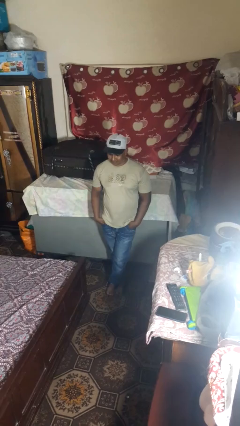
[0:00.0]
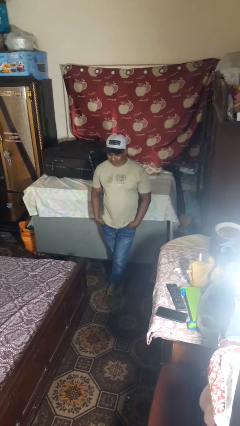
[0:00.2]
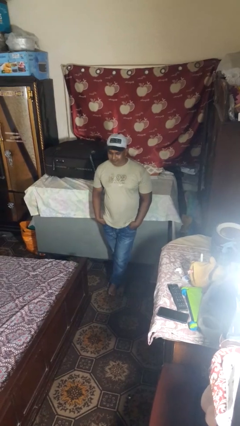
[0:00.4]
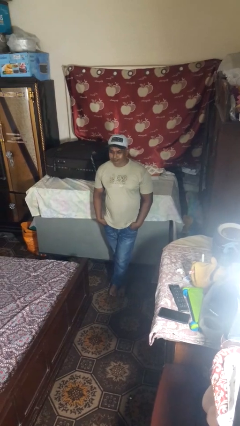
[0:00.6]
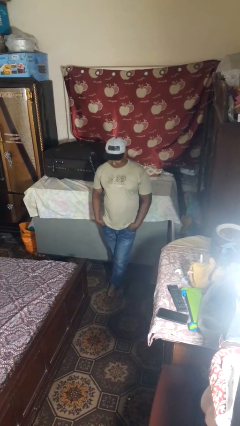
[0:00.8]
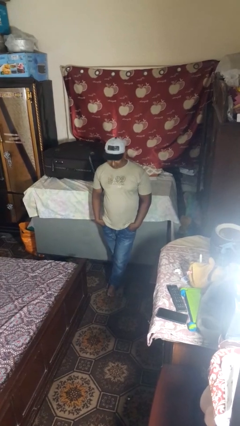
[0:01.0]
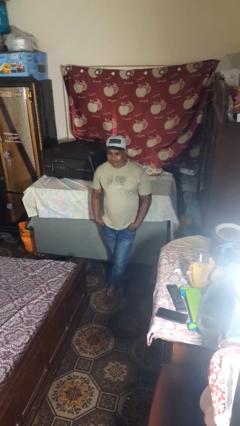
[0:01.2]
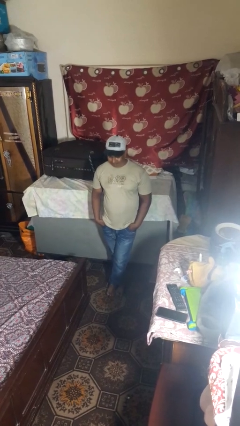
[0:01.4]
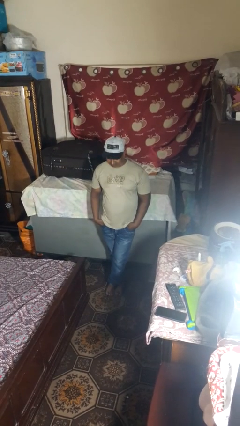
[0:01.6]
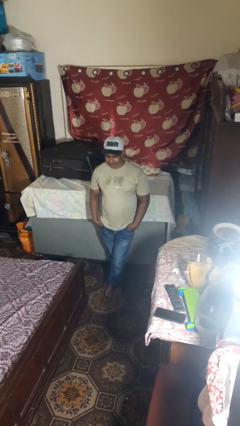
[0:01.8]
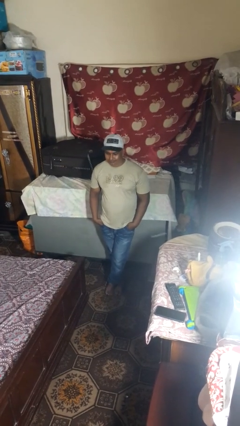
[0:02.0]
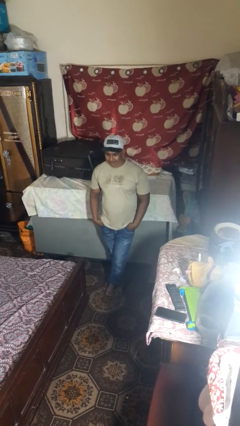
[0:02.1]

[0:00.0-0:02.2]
person nods head

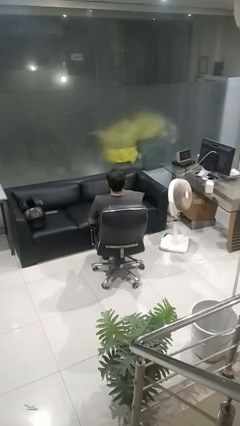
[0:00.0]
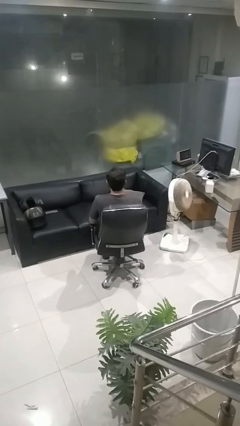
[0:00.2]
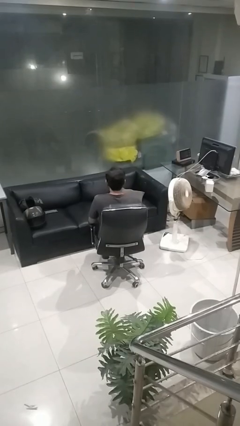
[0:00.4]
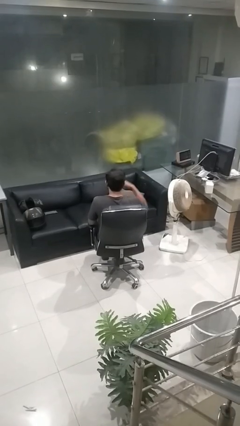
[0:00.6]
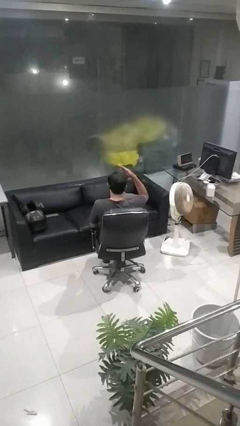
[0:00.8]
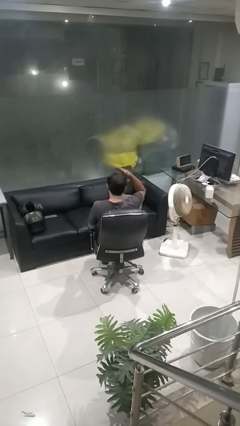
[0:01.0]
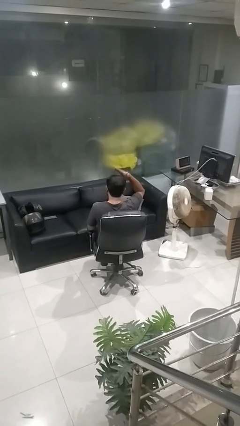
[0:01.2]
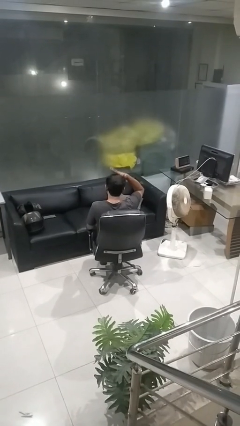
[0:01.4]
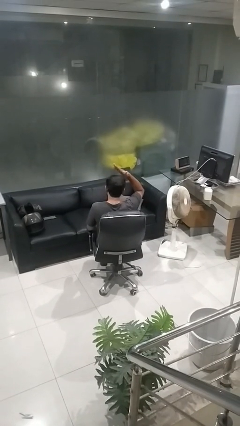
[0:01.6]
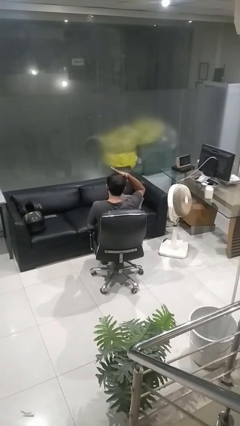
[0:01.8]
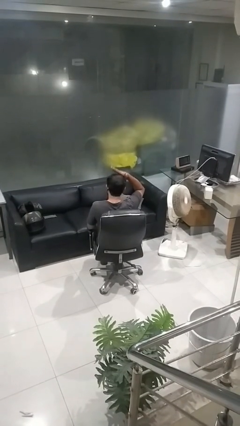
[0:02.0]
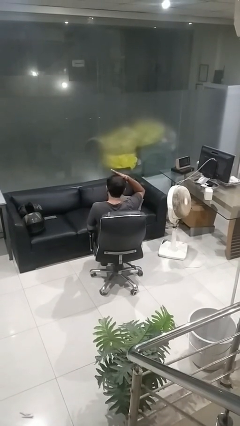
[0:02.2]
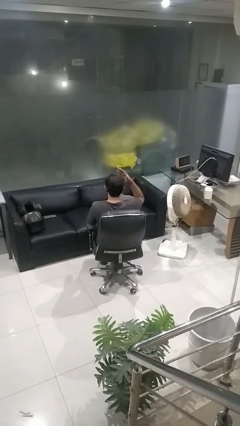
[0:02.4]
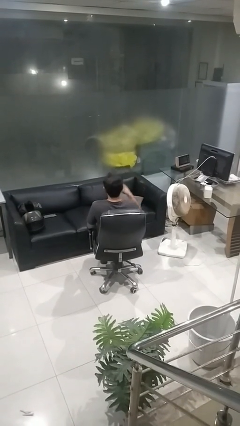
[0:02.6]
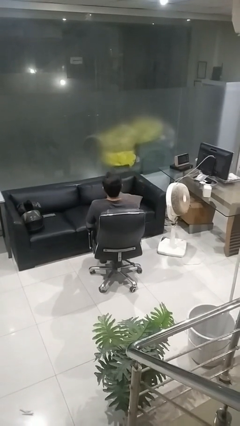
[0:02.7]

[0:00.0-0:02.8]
person pats head

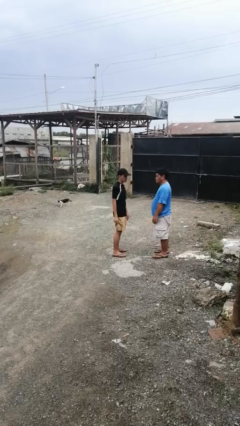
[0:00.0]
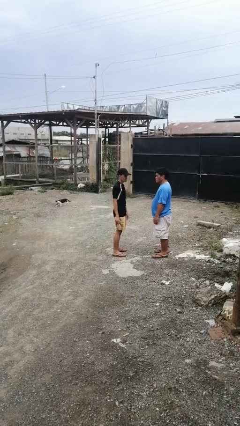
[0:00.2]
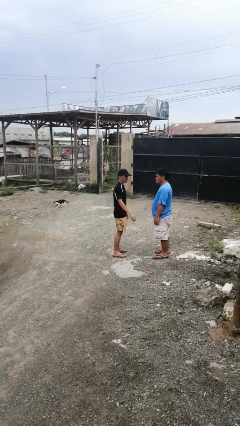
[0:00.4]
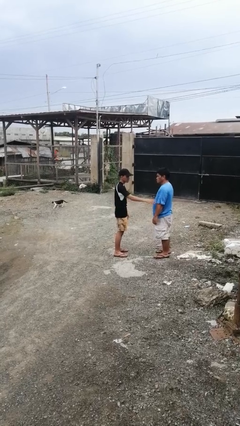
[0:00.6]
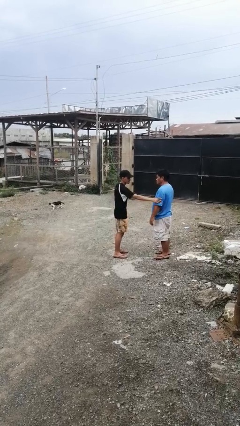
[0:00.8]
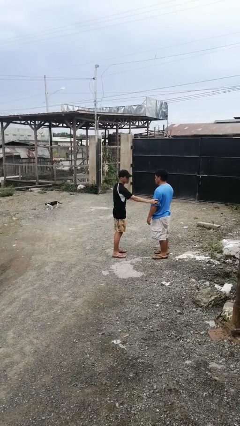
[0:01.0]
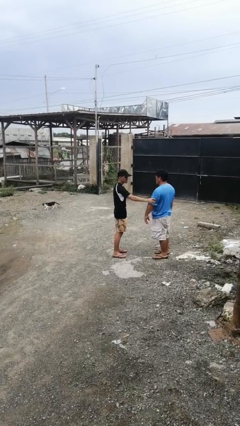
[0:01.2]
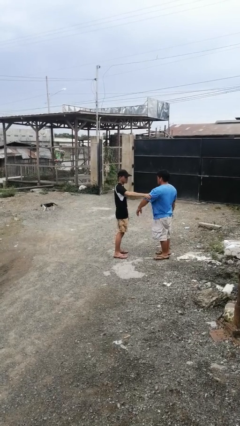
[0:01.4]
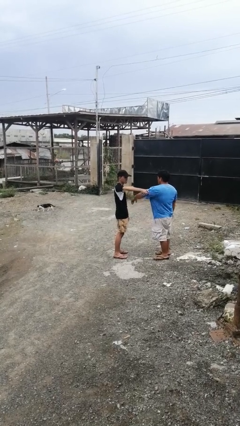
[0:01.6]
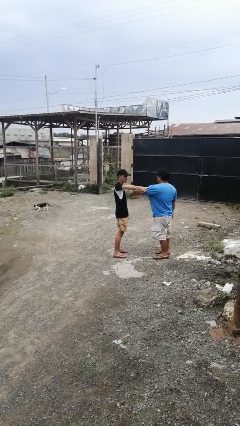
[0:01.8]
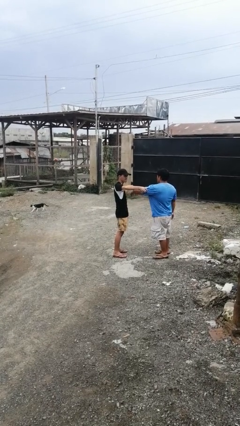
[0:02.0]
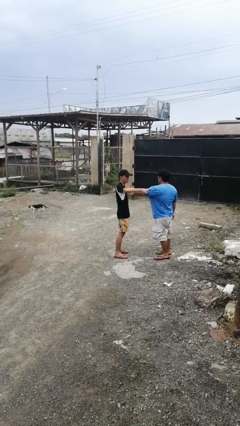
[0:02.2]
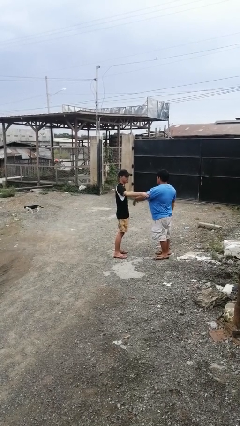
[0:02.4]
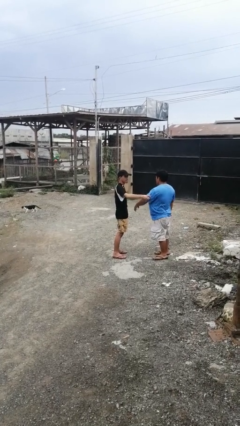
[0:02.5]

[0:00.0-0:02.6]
person grabs person by bicep

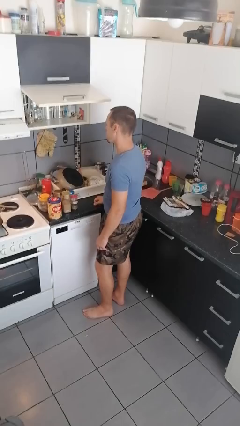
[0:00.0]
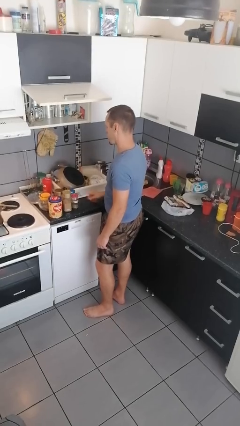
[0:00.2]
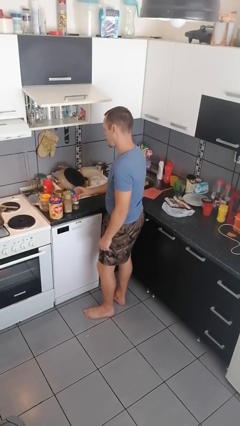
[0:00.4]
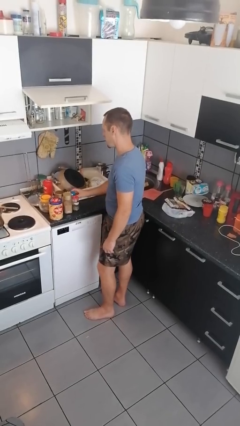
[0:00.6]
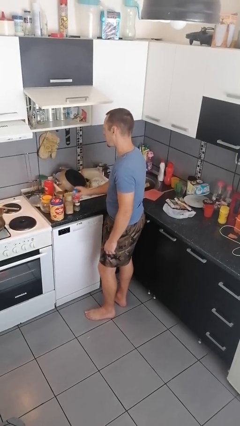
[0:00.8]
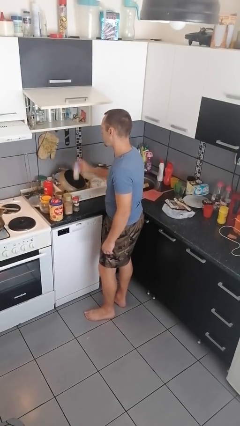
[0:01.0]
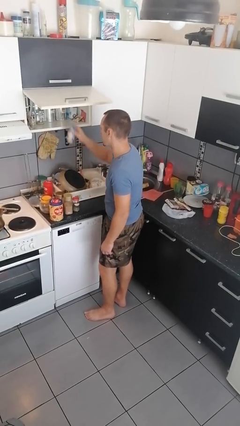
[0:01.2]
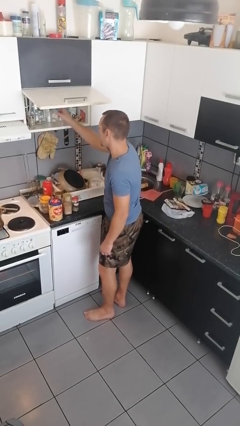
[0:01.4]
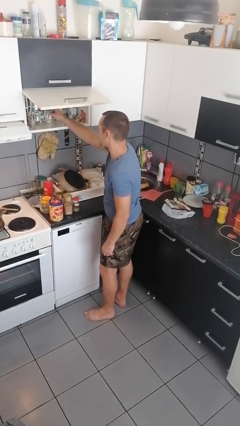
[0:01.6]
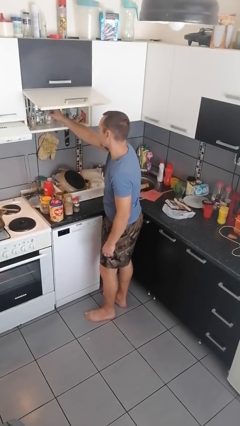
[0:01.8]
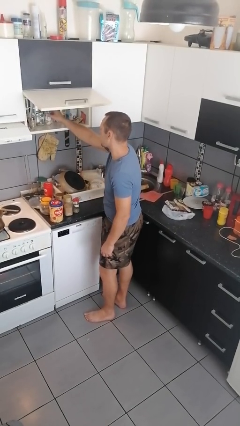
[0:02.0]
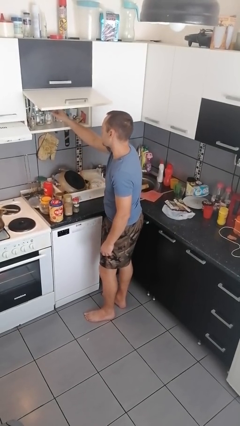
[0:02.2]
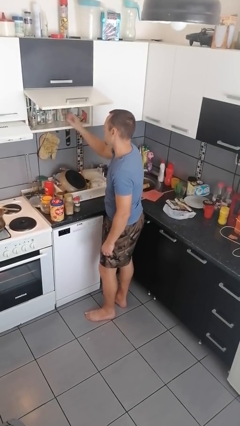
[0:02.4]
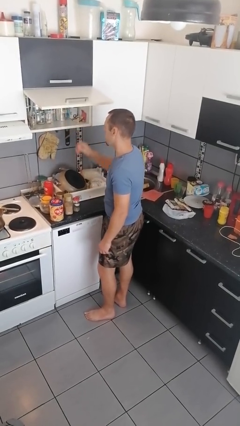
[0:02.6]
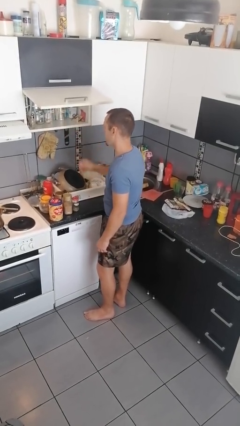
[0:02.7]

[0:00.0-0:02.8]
person loads groceries into cabinet

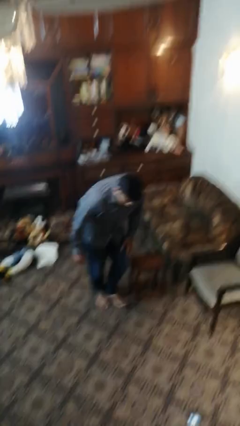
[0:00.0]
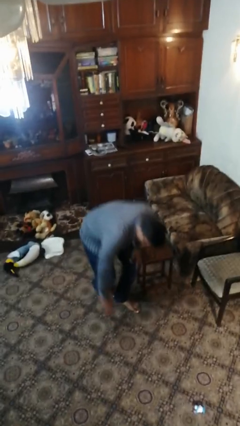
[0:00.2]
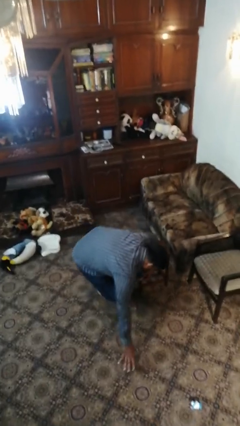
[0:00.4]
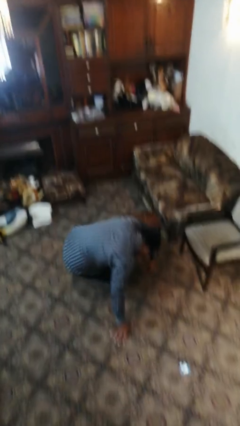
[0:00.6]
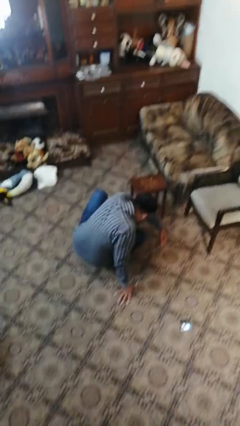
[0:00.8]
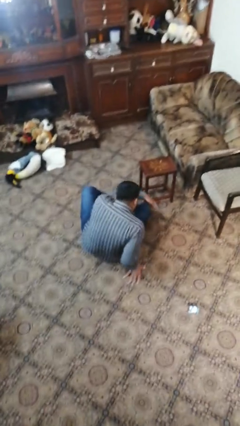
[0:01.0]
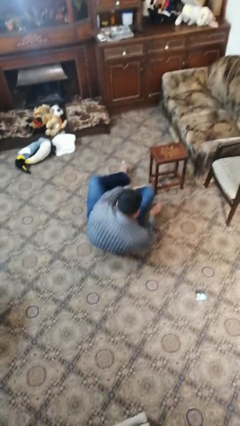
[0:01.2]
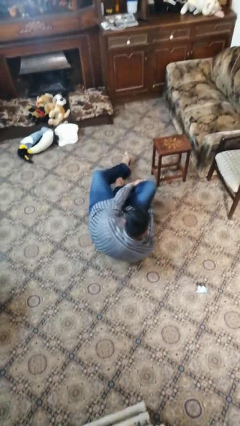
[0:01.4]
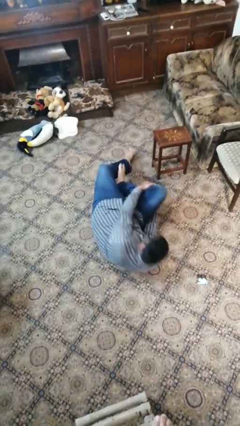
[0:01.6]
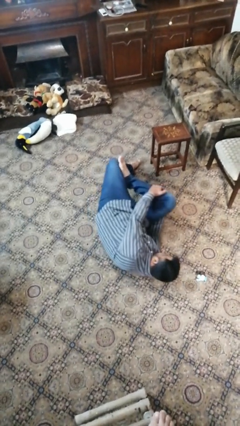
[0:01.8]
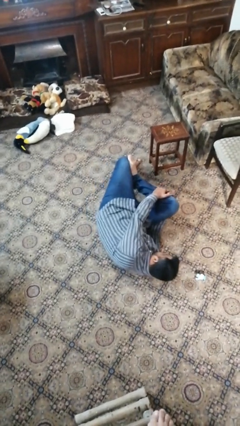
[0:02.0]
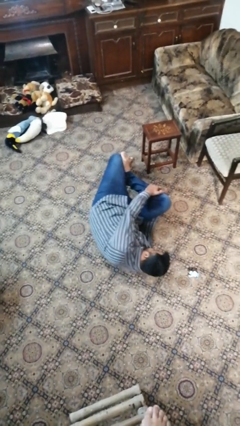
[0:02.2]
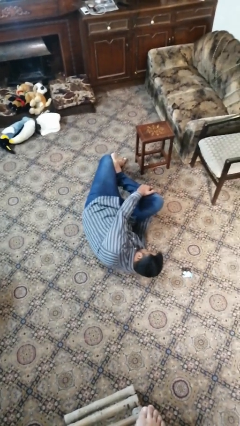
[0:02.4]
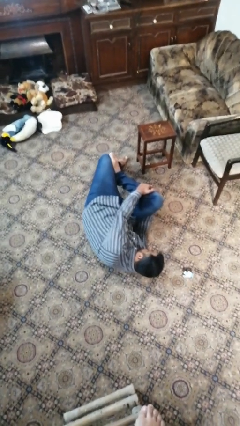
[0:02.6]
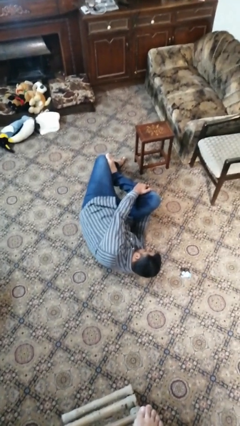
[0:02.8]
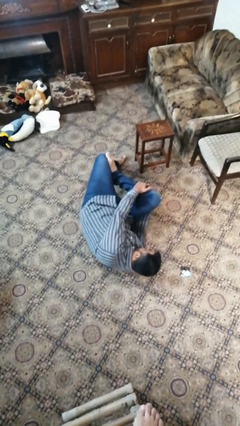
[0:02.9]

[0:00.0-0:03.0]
person lies down on floor

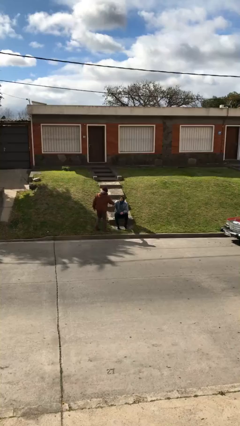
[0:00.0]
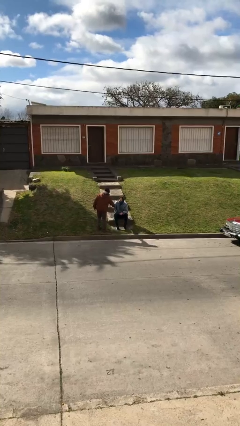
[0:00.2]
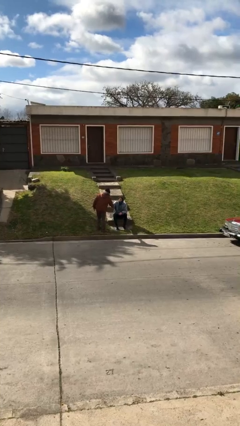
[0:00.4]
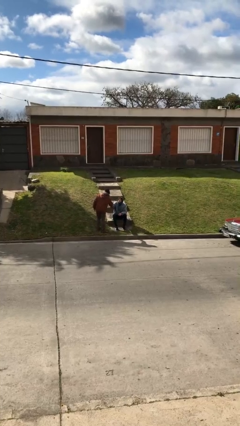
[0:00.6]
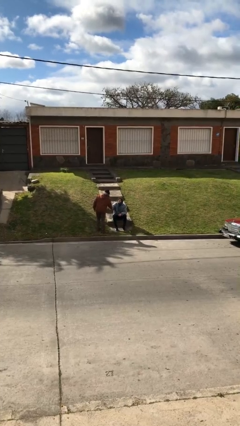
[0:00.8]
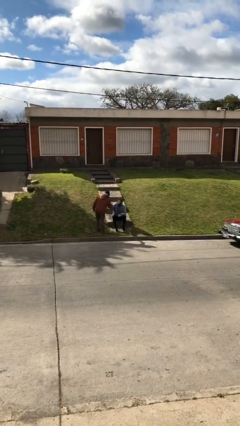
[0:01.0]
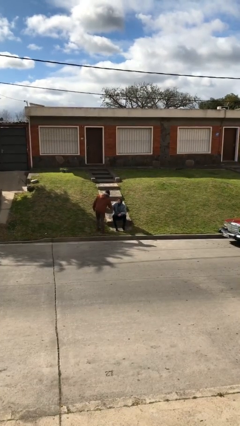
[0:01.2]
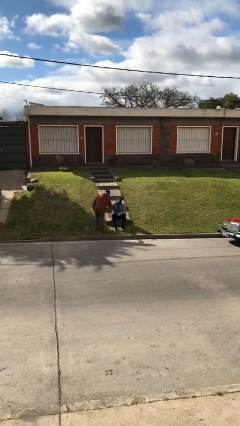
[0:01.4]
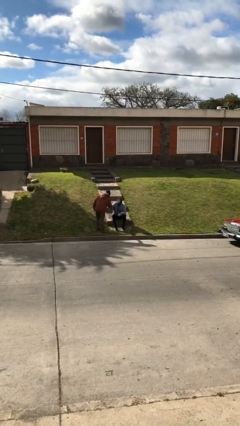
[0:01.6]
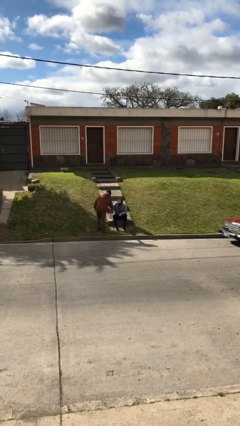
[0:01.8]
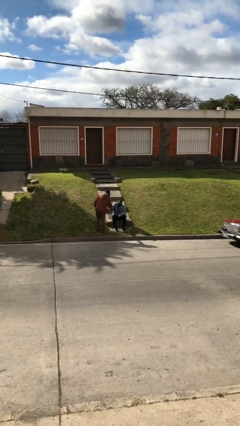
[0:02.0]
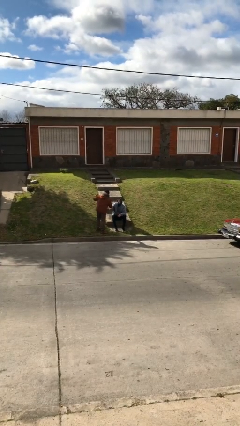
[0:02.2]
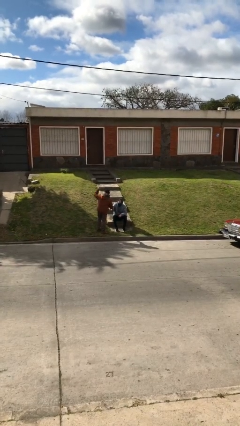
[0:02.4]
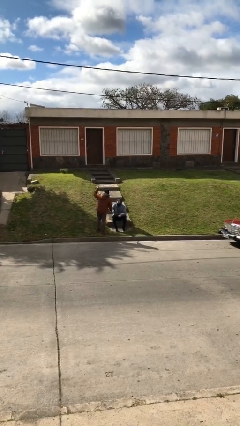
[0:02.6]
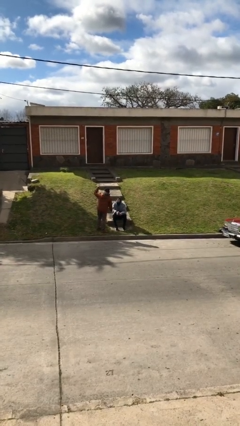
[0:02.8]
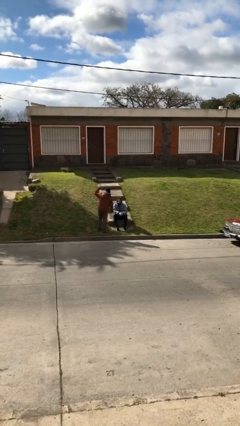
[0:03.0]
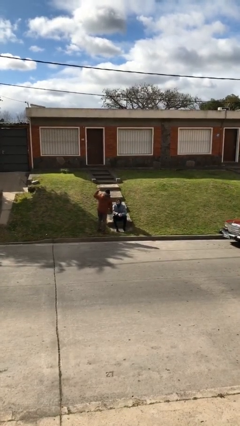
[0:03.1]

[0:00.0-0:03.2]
person shakes hand

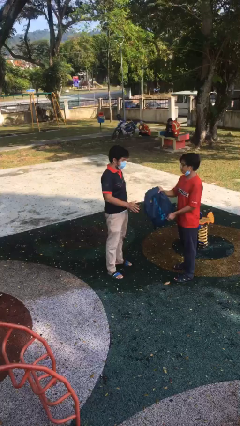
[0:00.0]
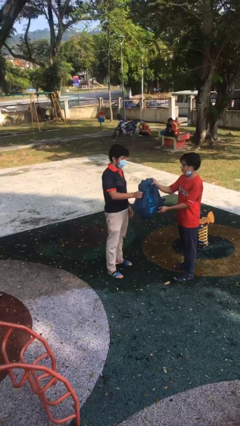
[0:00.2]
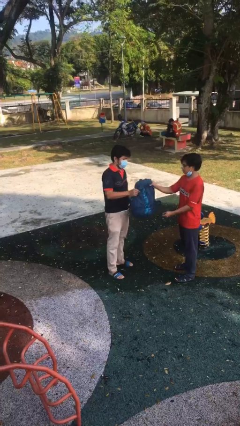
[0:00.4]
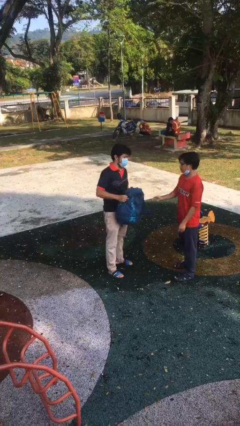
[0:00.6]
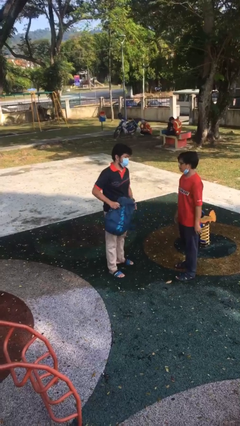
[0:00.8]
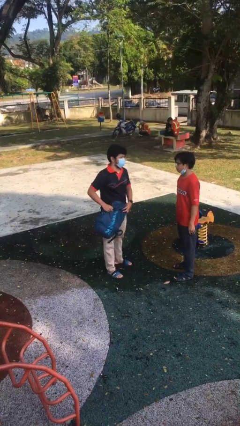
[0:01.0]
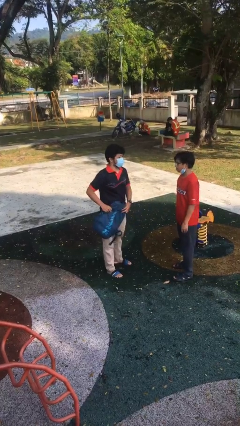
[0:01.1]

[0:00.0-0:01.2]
person transfers object to person
